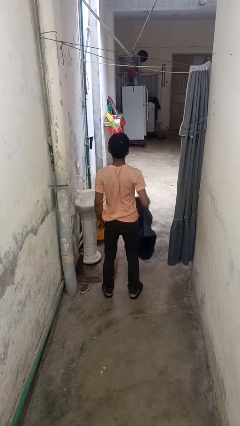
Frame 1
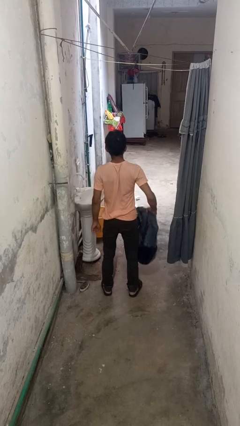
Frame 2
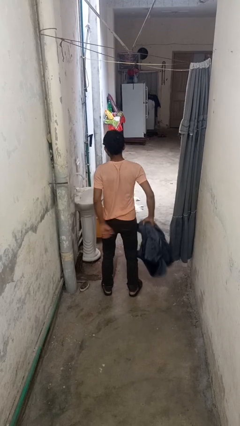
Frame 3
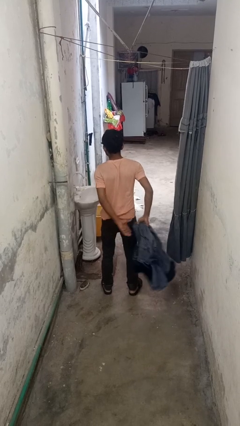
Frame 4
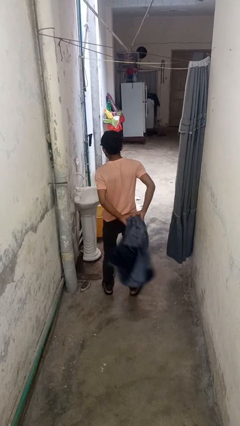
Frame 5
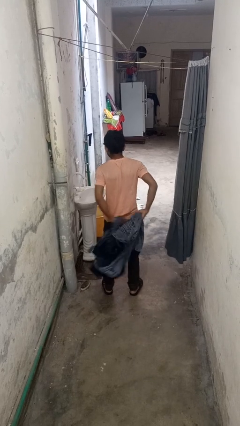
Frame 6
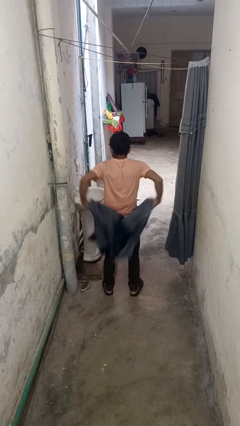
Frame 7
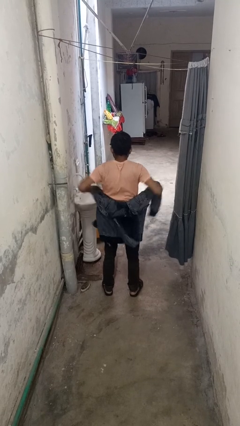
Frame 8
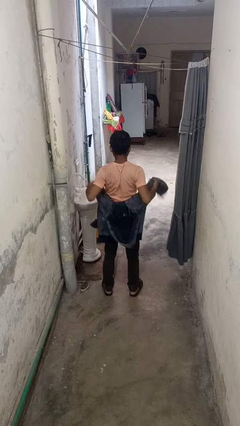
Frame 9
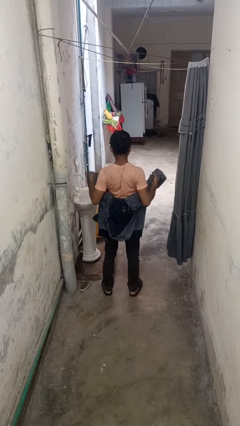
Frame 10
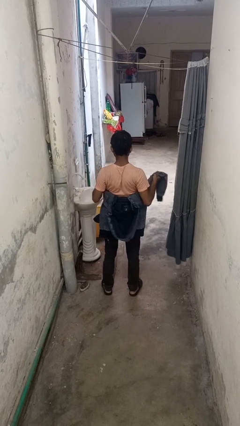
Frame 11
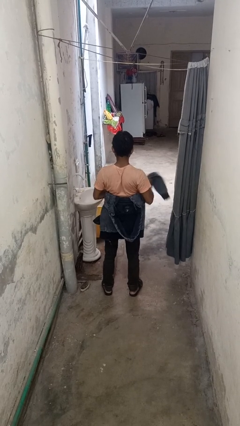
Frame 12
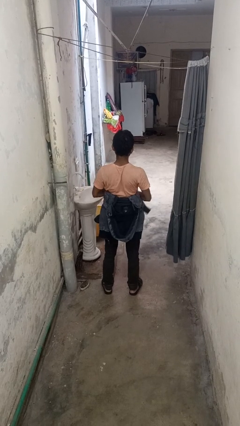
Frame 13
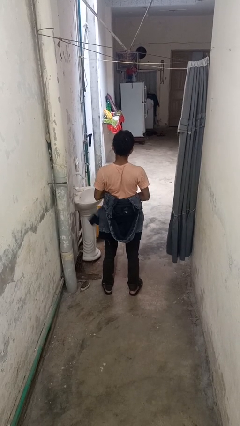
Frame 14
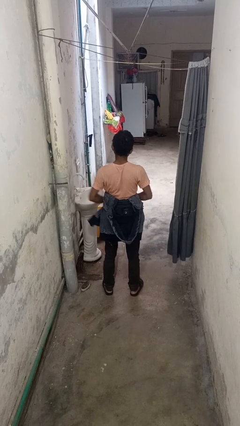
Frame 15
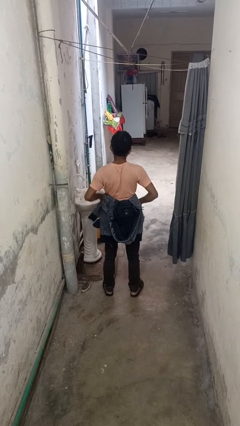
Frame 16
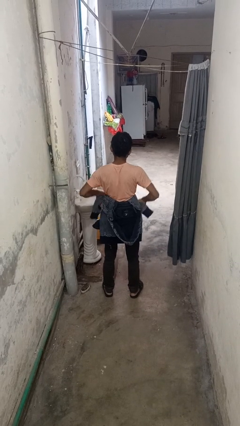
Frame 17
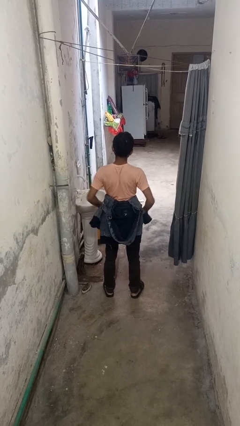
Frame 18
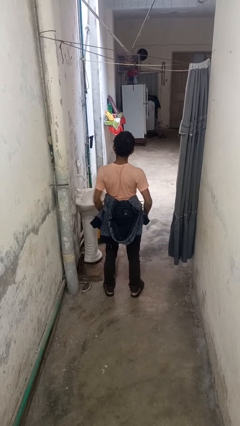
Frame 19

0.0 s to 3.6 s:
person ties jacket around waist

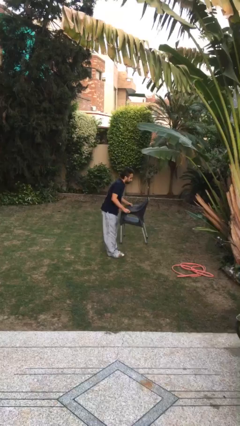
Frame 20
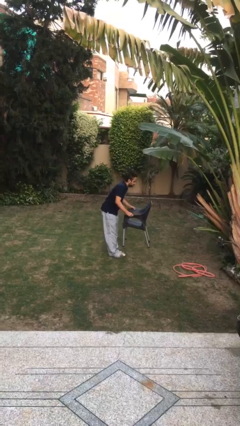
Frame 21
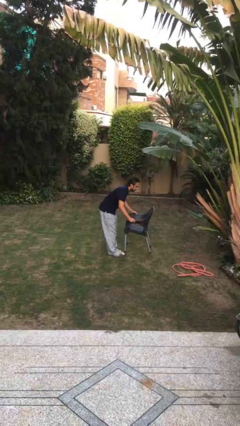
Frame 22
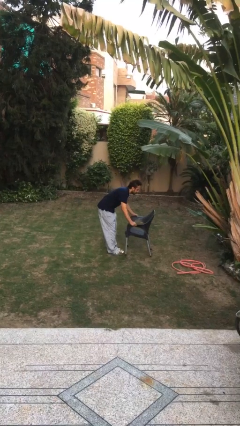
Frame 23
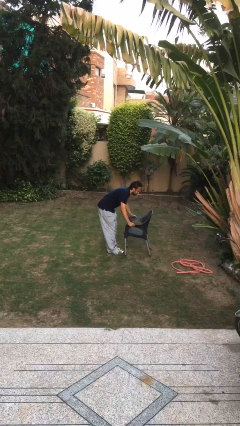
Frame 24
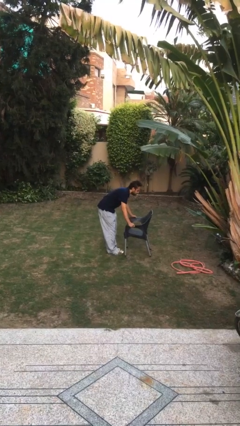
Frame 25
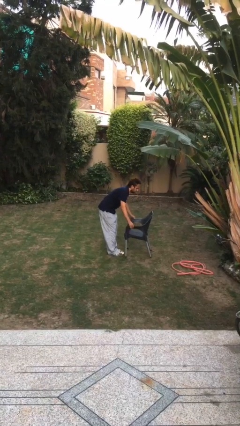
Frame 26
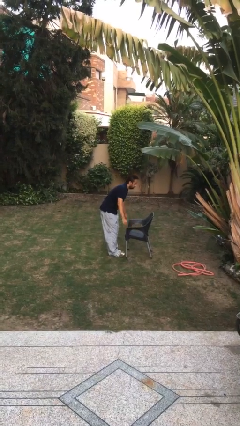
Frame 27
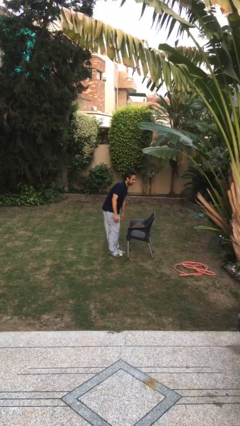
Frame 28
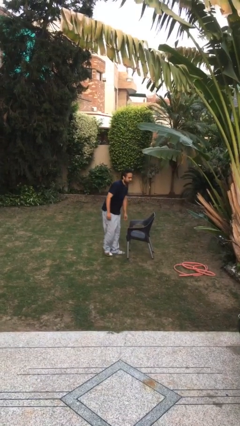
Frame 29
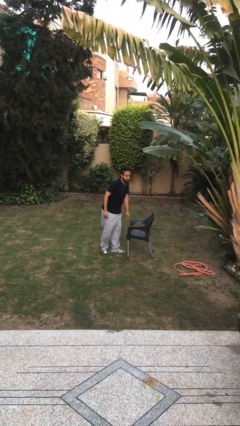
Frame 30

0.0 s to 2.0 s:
person puts down object on floor

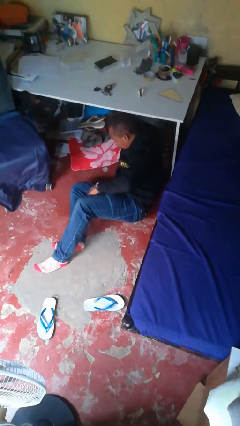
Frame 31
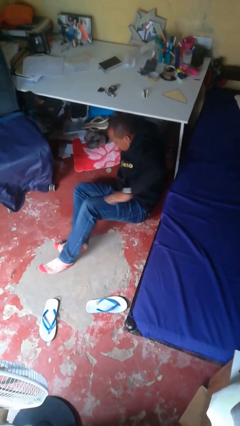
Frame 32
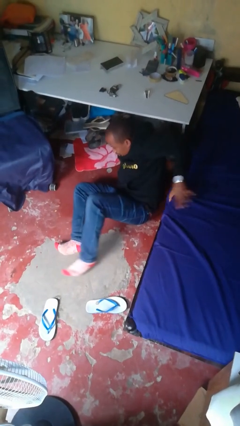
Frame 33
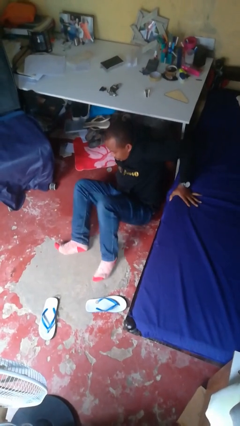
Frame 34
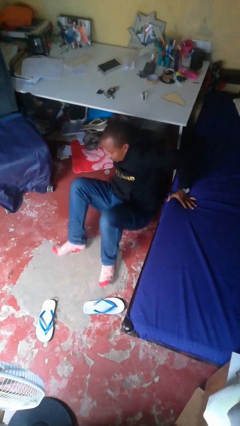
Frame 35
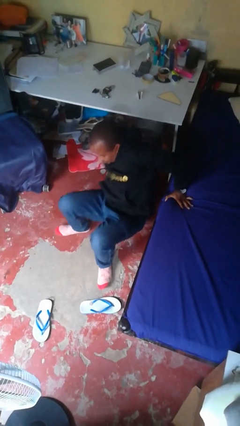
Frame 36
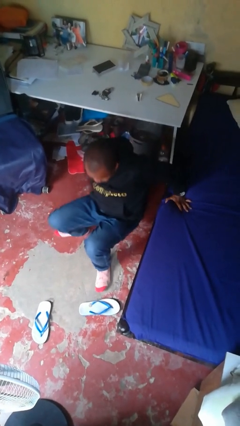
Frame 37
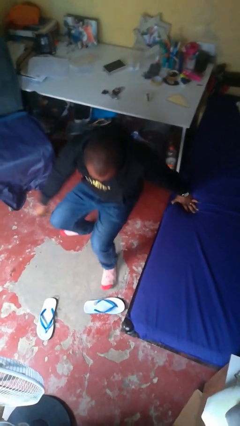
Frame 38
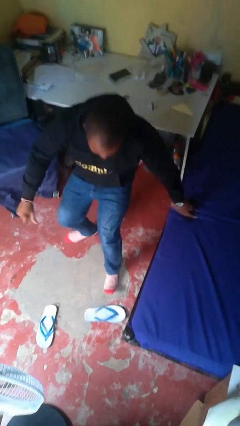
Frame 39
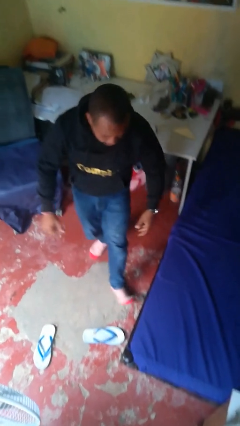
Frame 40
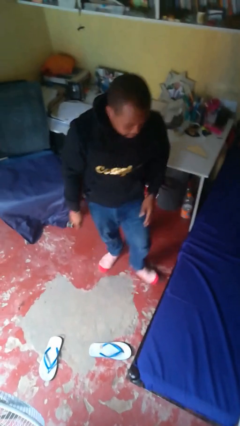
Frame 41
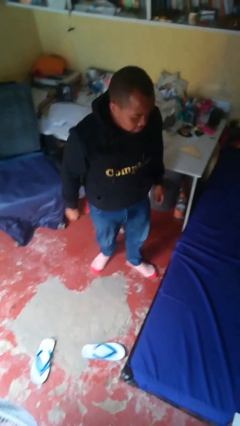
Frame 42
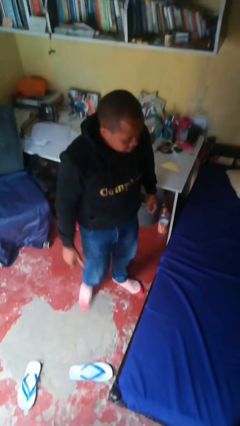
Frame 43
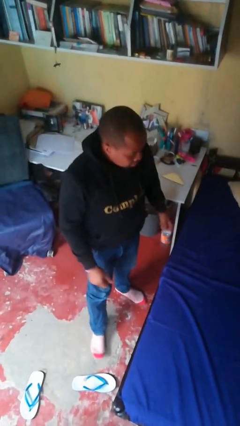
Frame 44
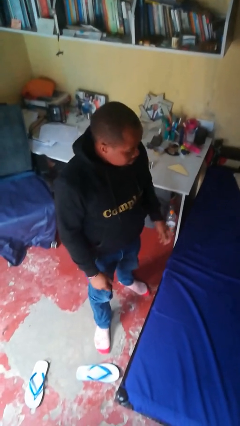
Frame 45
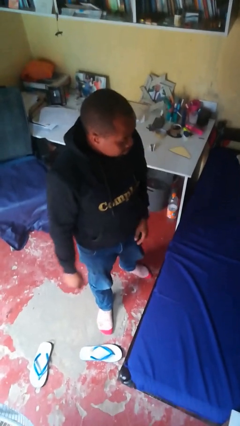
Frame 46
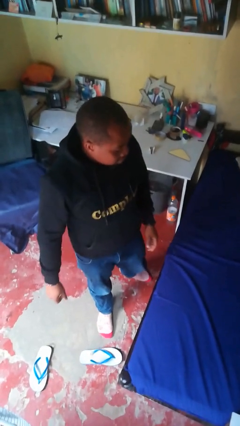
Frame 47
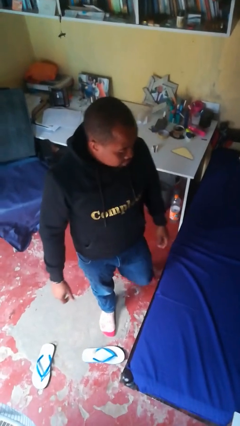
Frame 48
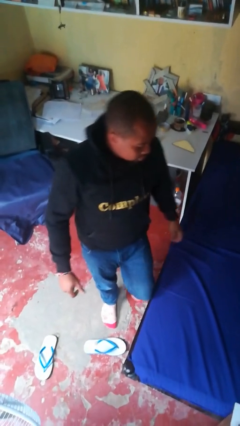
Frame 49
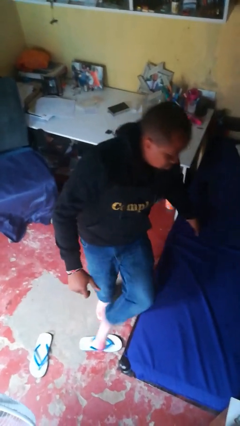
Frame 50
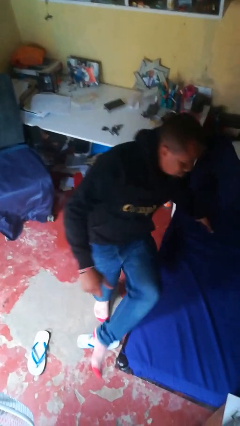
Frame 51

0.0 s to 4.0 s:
person stands up from floor

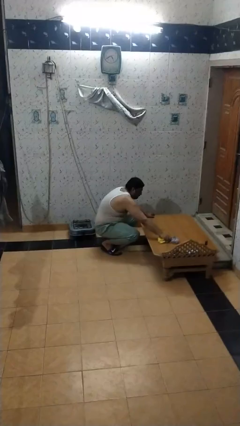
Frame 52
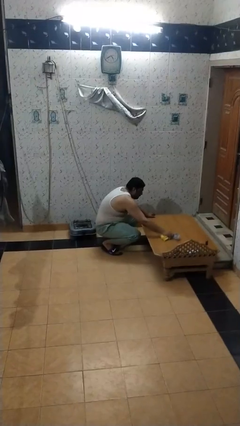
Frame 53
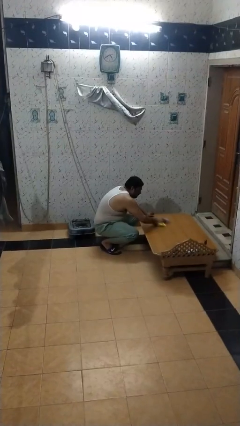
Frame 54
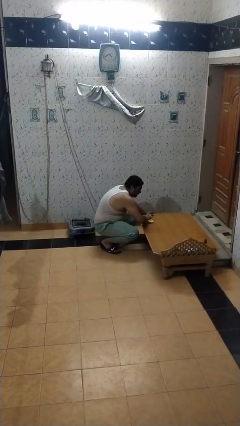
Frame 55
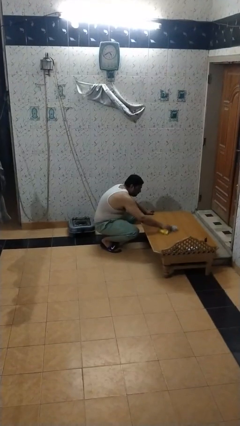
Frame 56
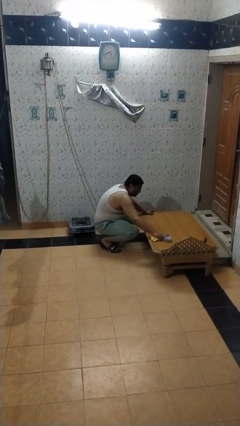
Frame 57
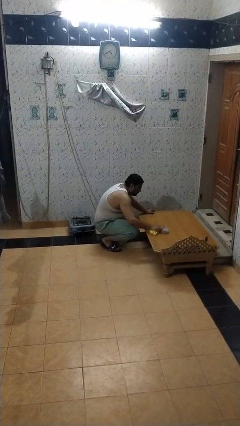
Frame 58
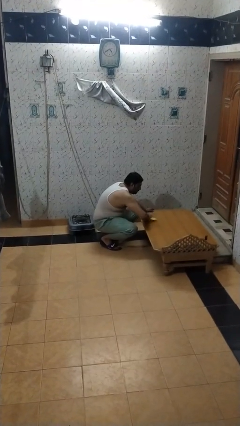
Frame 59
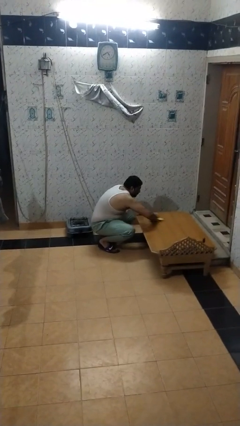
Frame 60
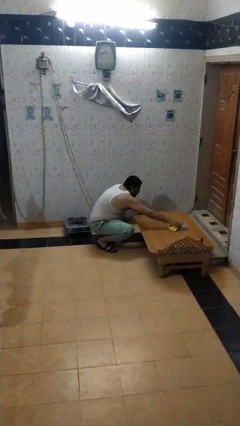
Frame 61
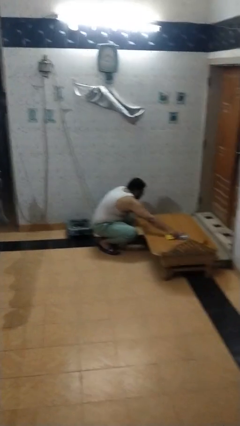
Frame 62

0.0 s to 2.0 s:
person cleans table with rag

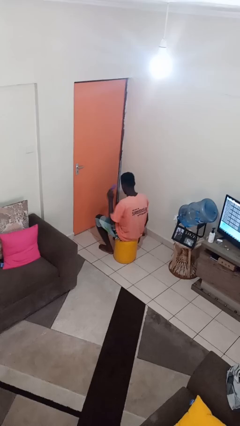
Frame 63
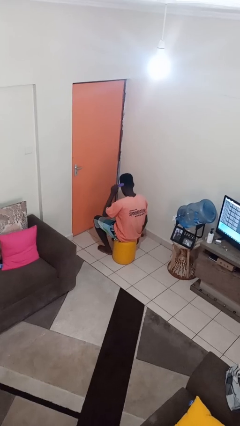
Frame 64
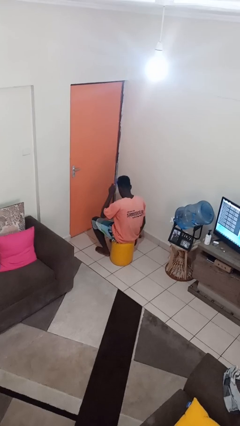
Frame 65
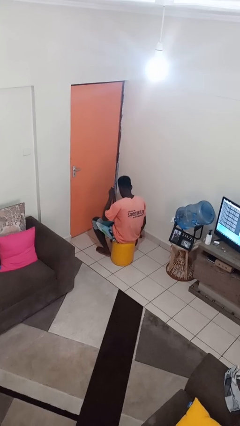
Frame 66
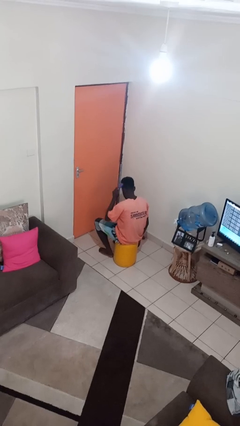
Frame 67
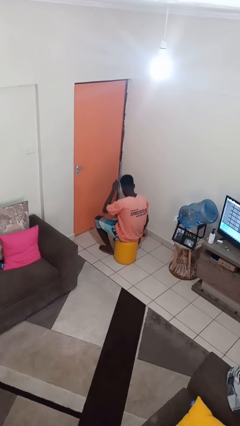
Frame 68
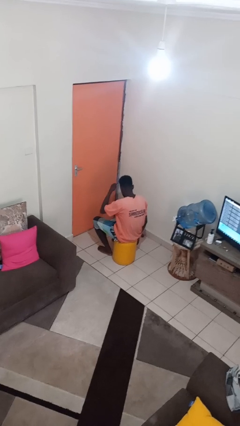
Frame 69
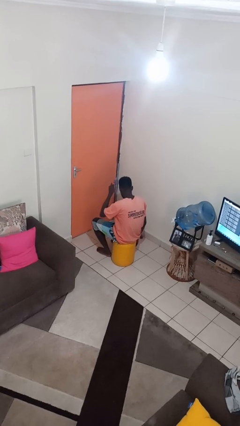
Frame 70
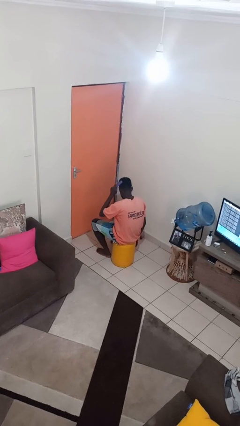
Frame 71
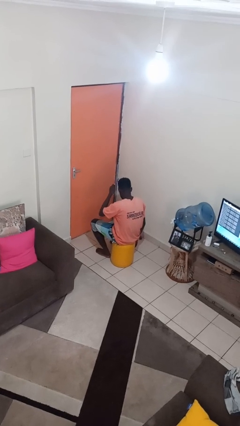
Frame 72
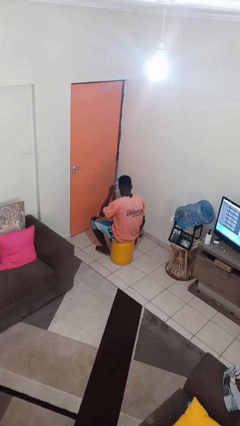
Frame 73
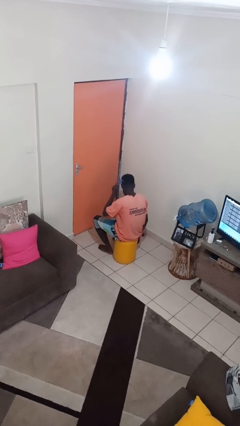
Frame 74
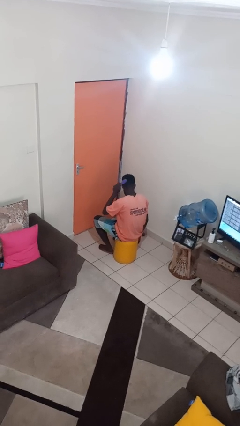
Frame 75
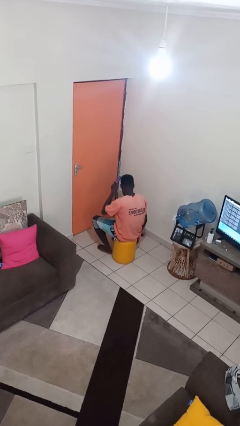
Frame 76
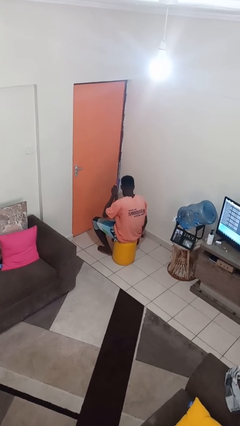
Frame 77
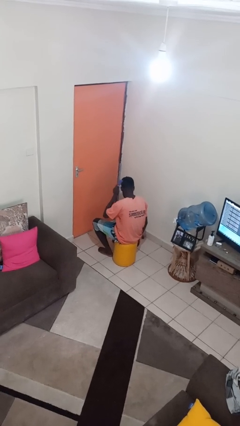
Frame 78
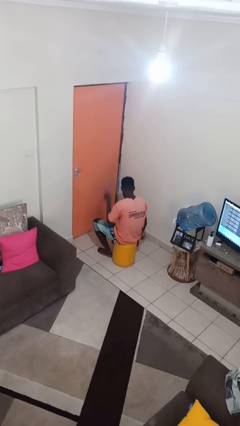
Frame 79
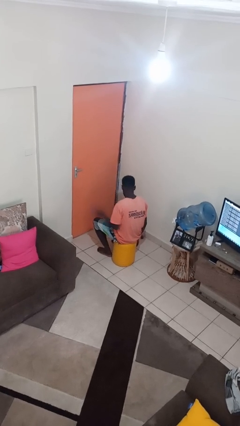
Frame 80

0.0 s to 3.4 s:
person brushes hair

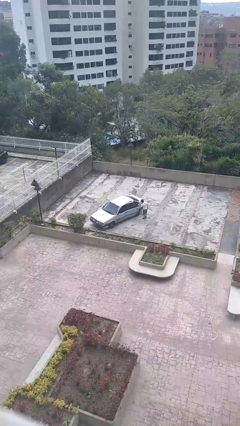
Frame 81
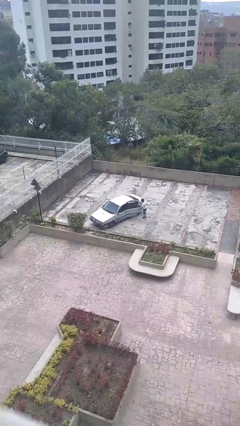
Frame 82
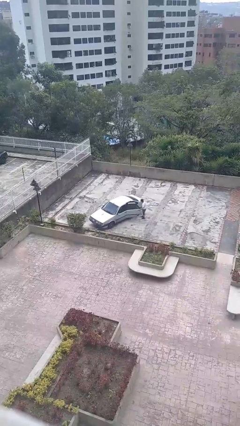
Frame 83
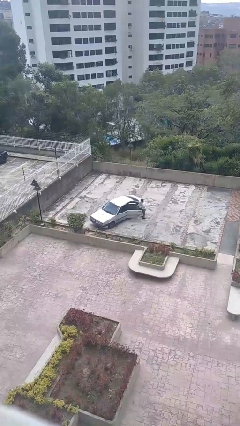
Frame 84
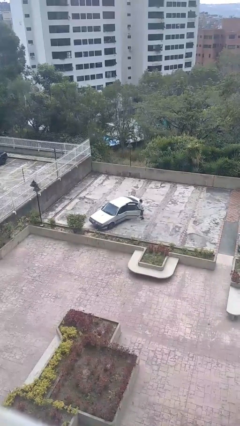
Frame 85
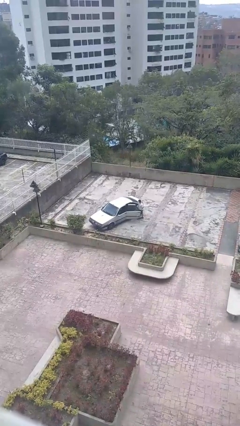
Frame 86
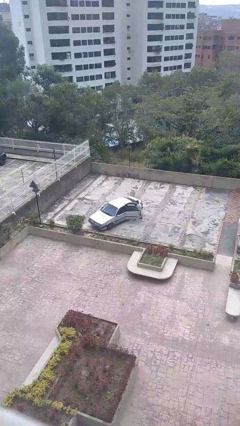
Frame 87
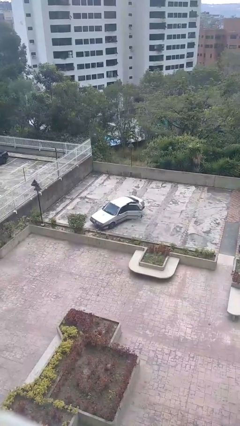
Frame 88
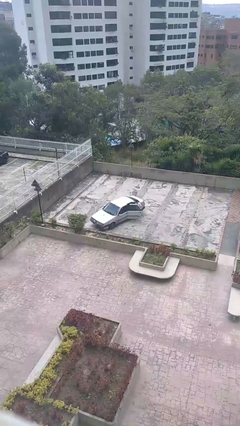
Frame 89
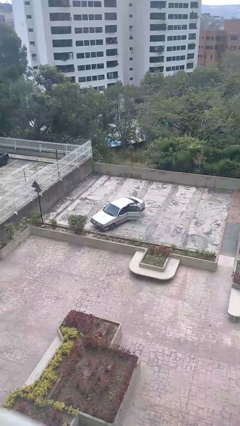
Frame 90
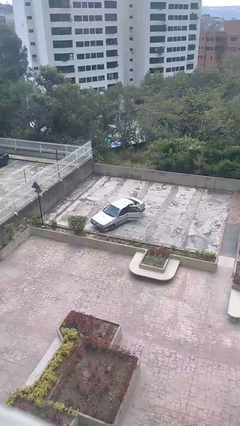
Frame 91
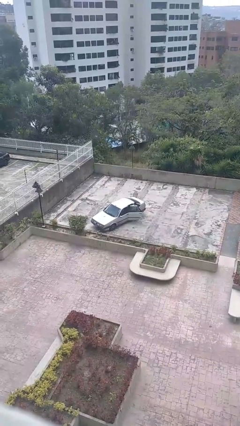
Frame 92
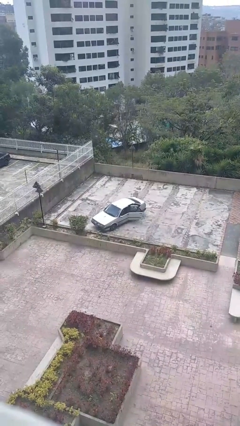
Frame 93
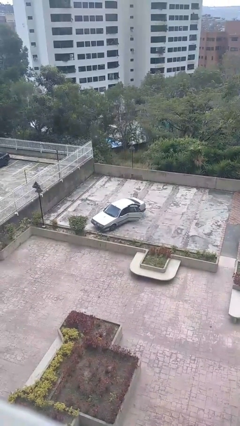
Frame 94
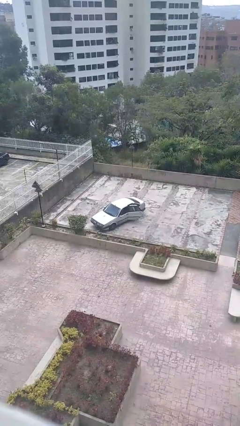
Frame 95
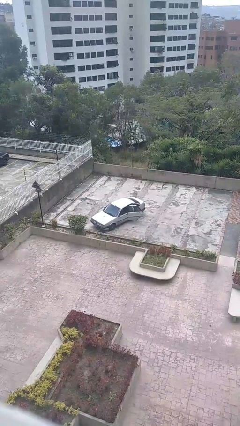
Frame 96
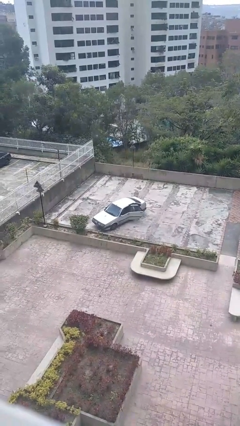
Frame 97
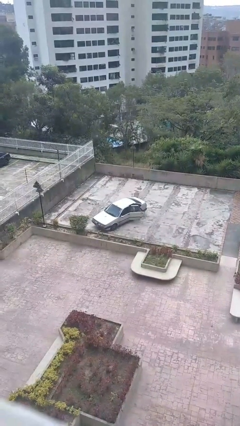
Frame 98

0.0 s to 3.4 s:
car picks up person
